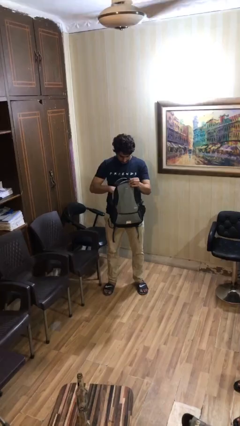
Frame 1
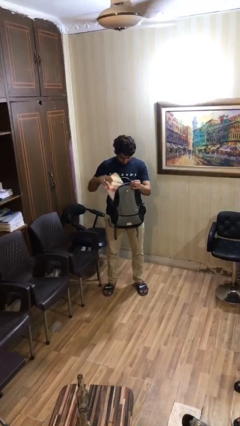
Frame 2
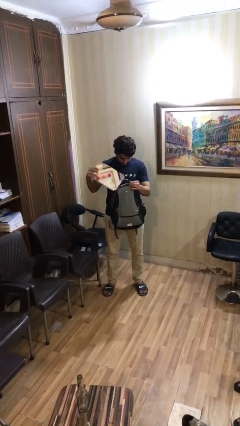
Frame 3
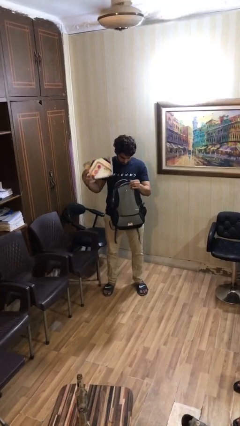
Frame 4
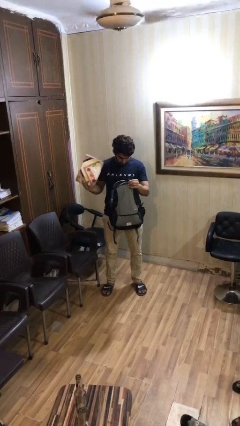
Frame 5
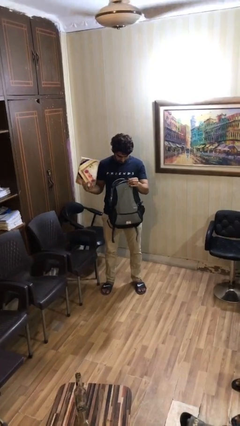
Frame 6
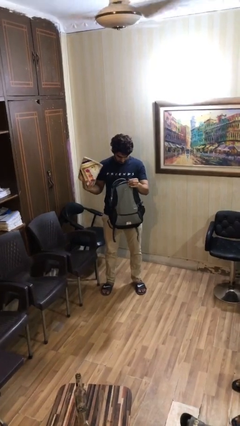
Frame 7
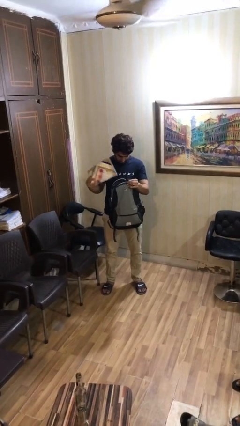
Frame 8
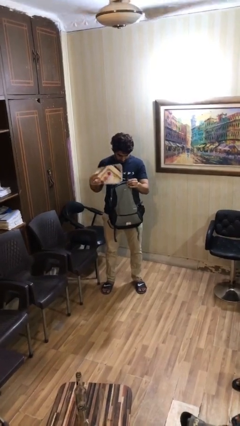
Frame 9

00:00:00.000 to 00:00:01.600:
person takes object from backpack

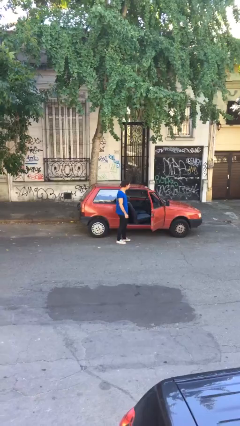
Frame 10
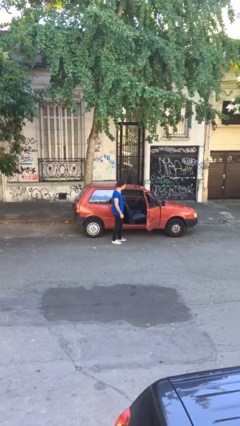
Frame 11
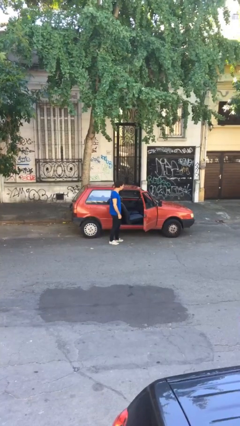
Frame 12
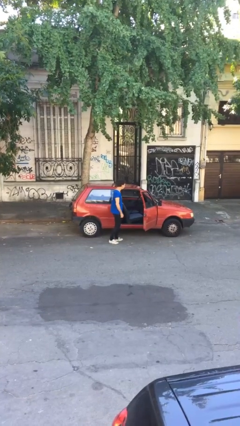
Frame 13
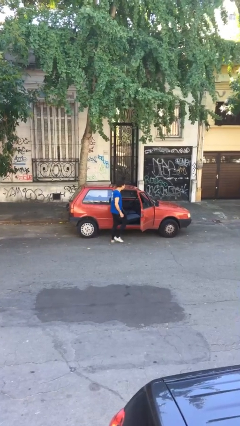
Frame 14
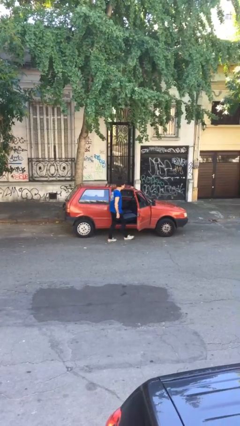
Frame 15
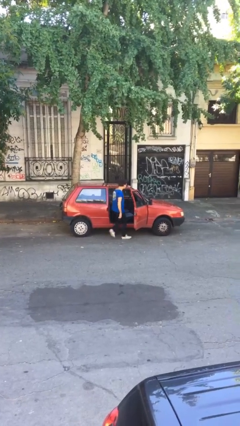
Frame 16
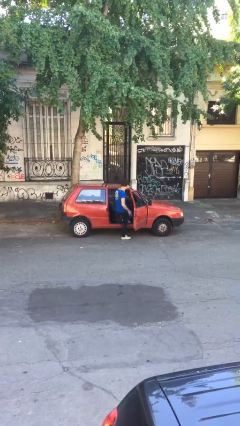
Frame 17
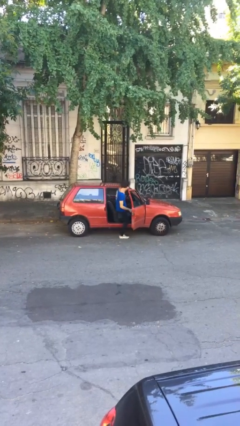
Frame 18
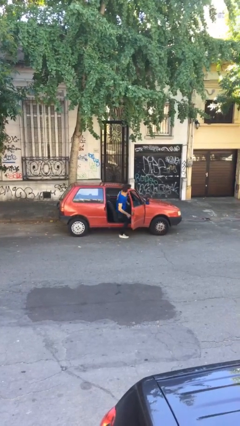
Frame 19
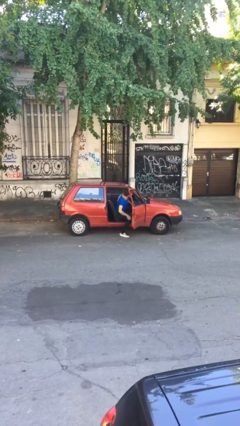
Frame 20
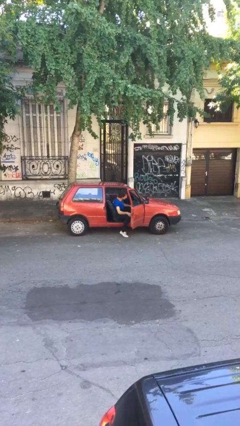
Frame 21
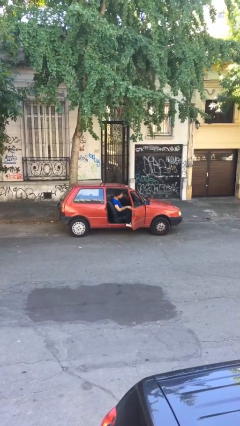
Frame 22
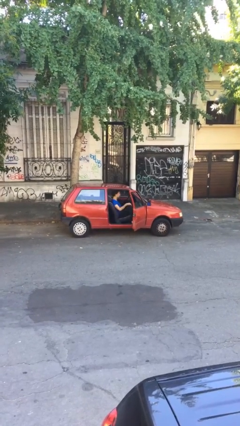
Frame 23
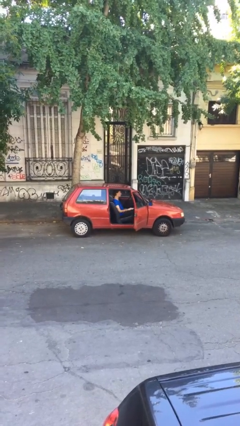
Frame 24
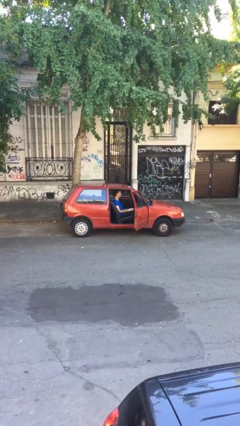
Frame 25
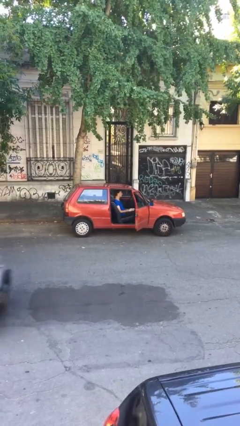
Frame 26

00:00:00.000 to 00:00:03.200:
person enters car

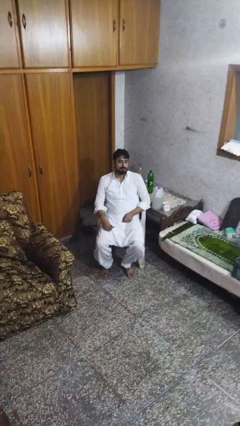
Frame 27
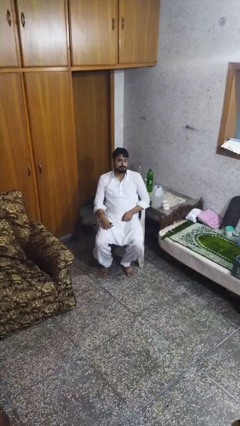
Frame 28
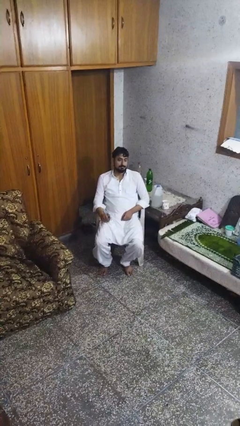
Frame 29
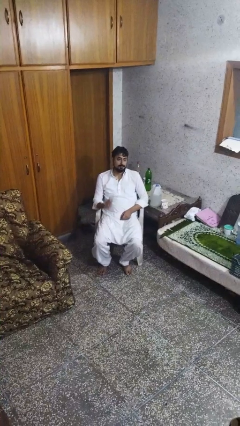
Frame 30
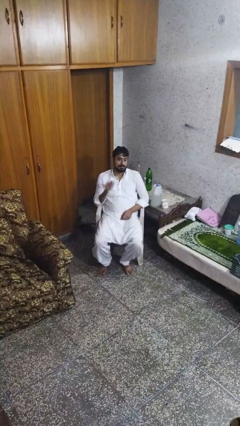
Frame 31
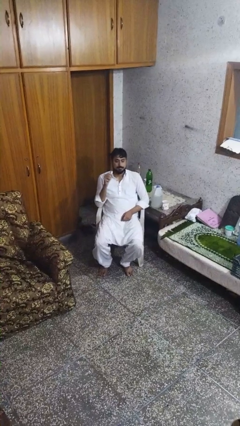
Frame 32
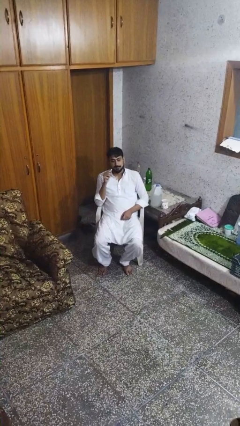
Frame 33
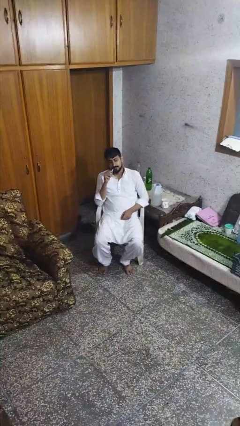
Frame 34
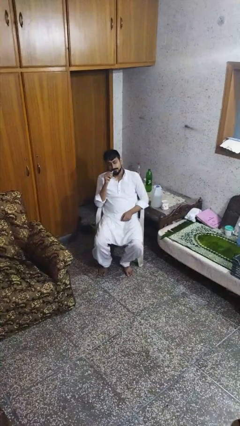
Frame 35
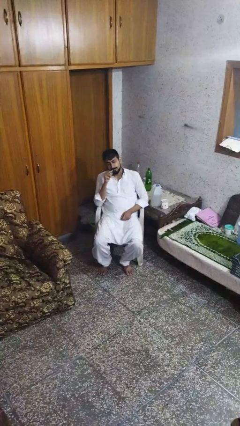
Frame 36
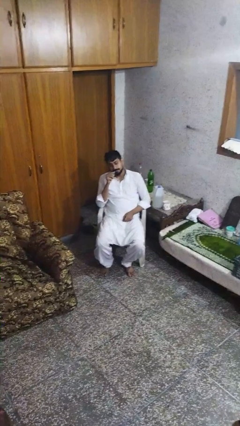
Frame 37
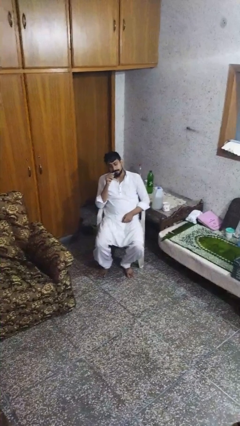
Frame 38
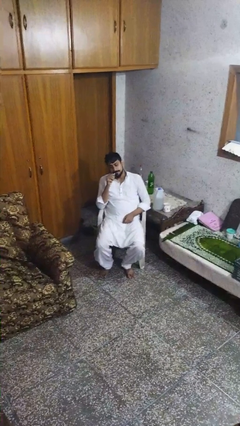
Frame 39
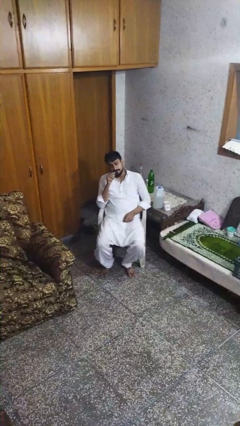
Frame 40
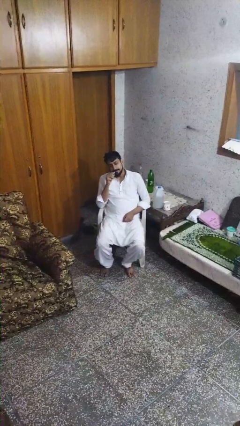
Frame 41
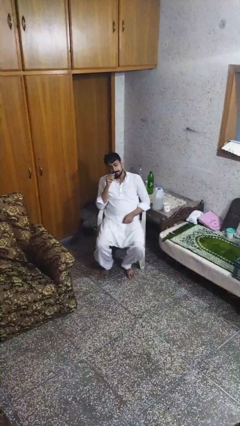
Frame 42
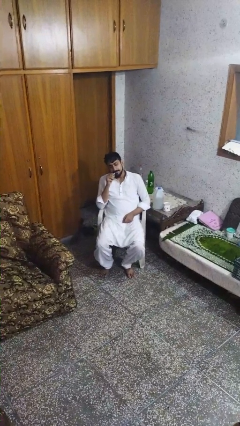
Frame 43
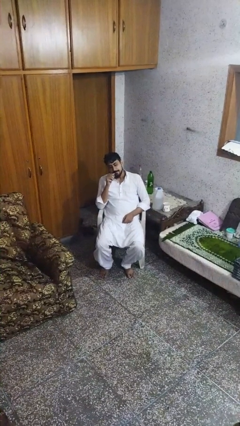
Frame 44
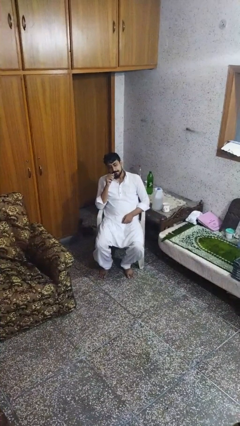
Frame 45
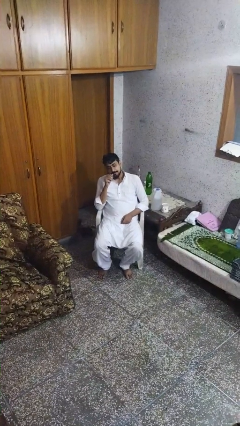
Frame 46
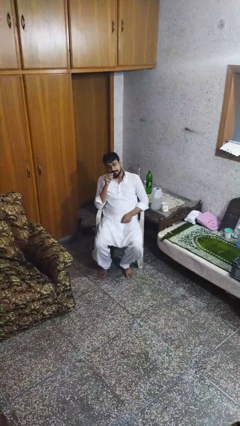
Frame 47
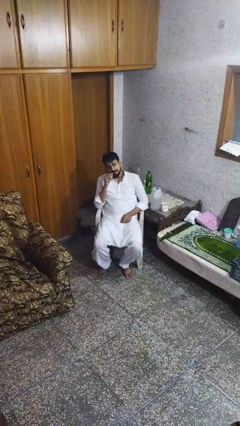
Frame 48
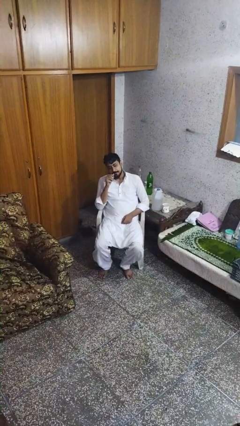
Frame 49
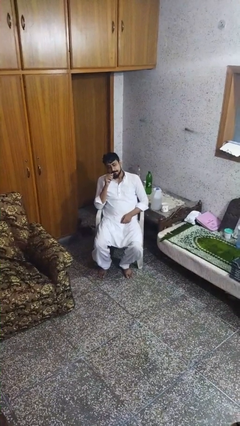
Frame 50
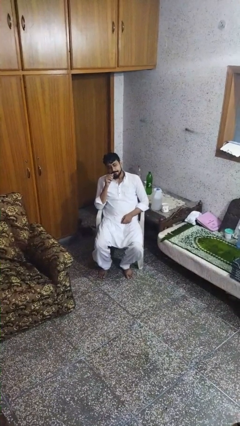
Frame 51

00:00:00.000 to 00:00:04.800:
person vapes

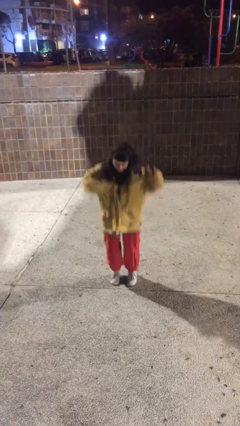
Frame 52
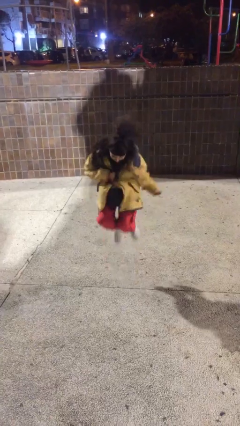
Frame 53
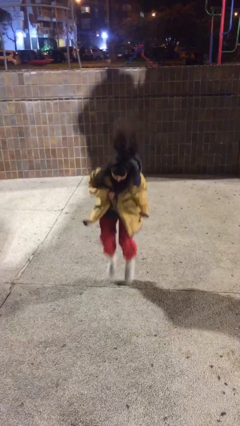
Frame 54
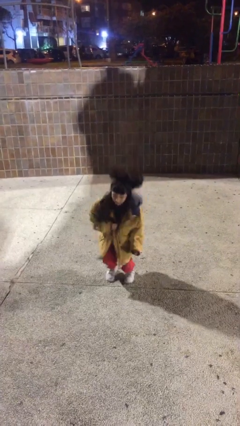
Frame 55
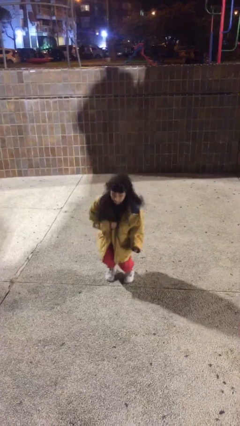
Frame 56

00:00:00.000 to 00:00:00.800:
person jumps

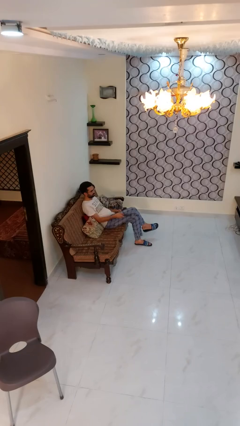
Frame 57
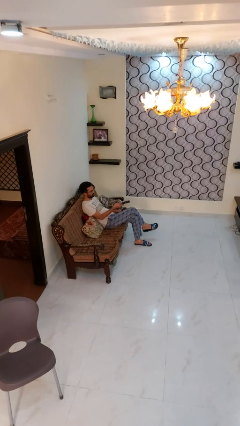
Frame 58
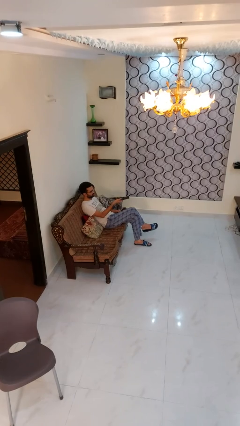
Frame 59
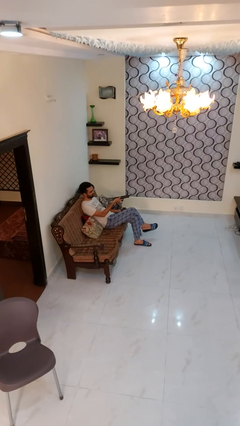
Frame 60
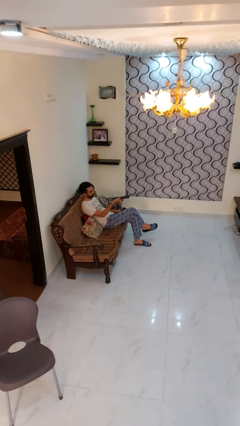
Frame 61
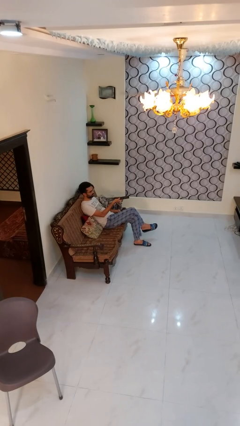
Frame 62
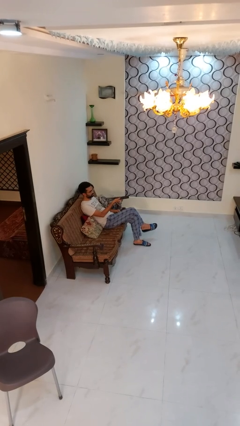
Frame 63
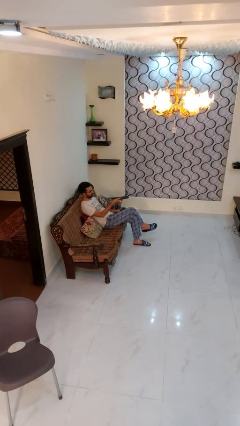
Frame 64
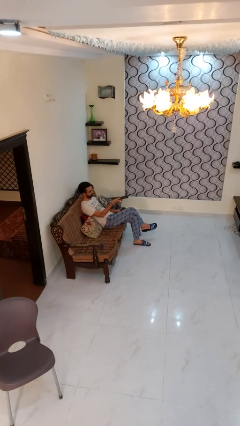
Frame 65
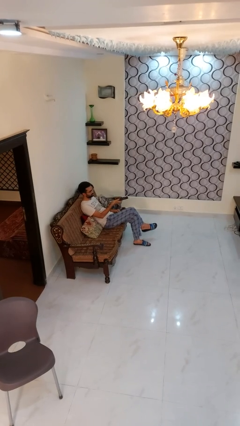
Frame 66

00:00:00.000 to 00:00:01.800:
person uses television remote

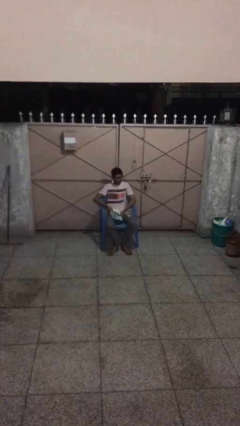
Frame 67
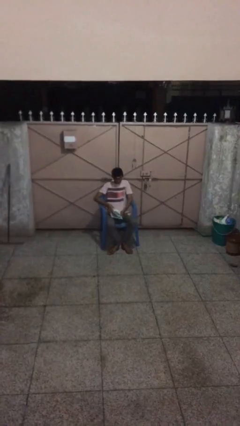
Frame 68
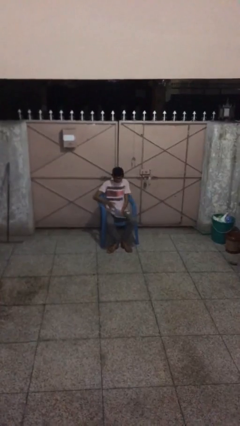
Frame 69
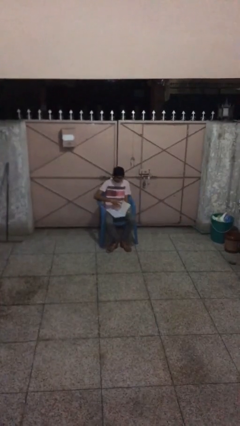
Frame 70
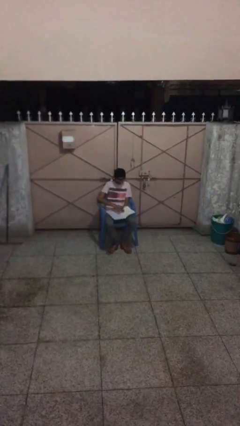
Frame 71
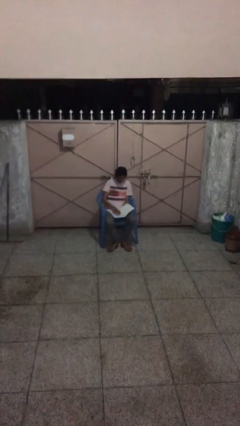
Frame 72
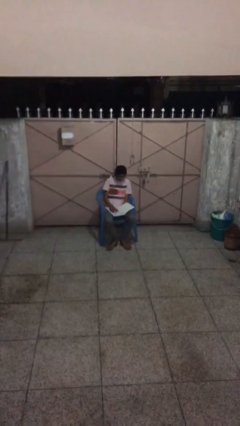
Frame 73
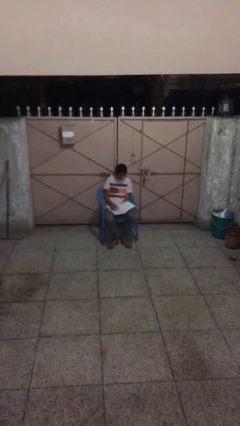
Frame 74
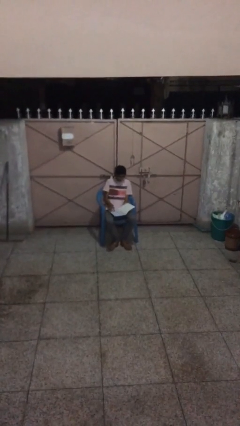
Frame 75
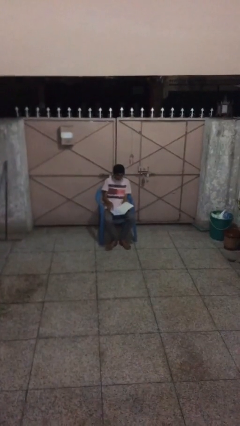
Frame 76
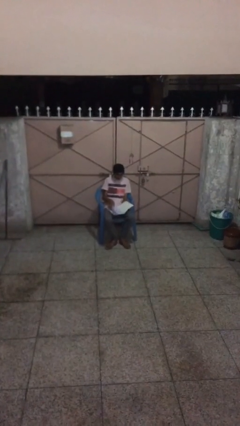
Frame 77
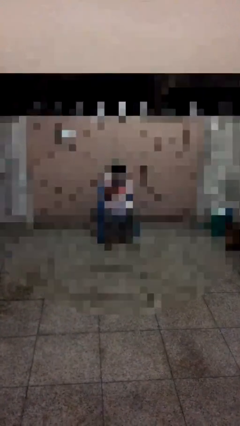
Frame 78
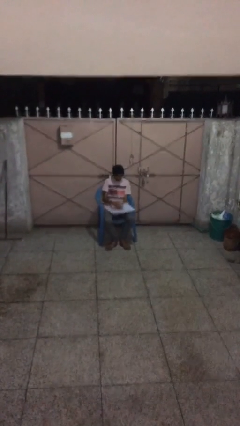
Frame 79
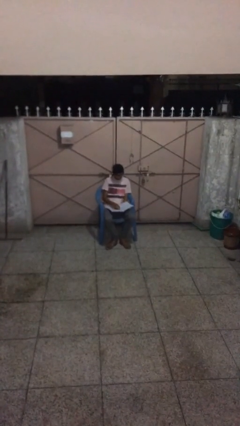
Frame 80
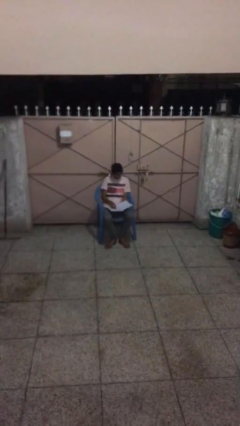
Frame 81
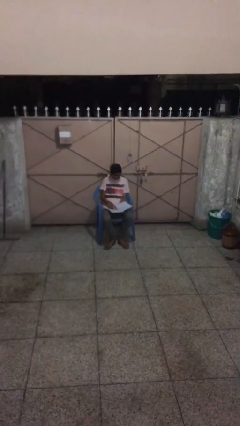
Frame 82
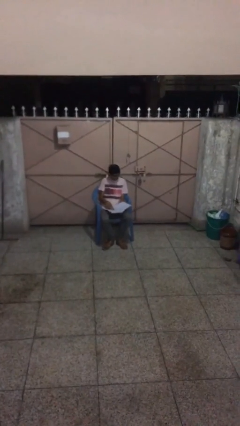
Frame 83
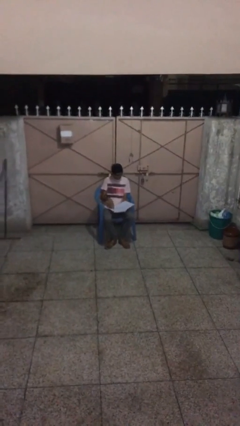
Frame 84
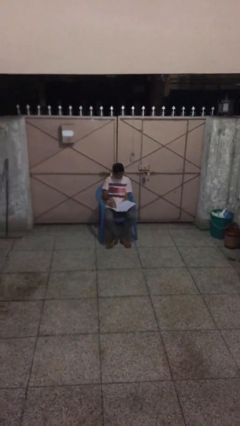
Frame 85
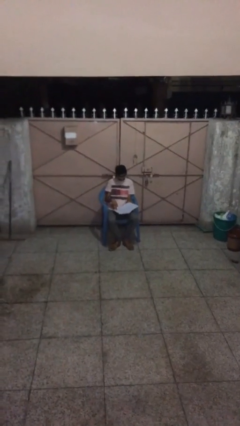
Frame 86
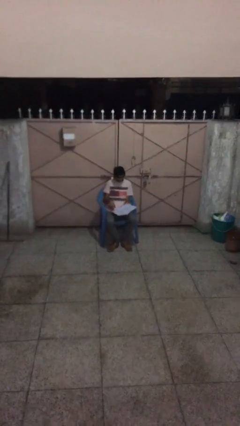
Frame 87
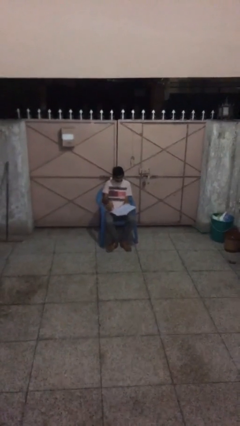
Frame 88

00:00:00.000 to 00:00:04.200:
person reads document

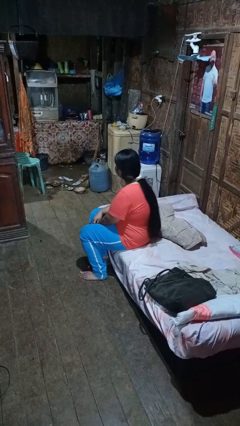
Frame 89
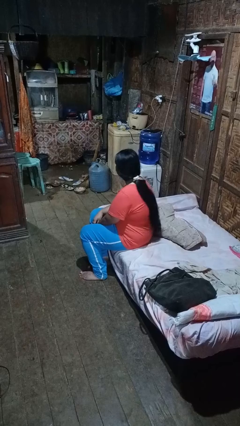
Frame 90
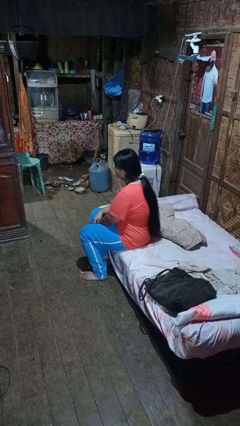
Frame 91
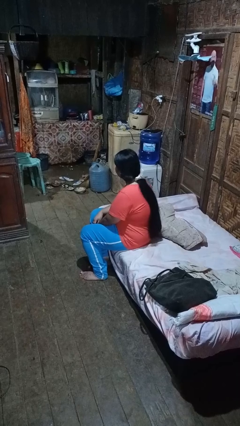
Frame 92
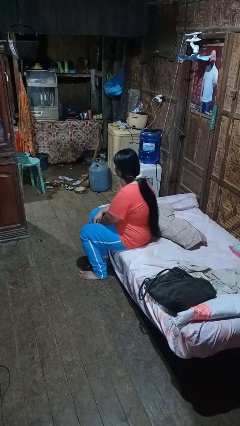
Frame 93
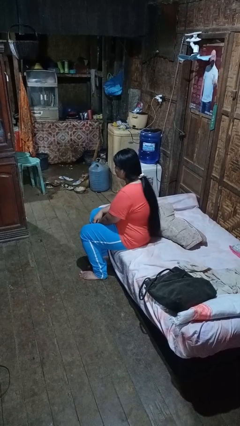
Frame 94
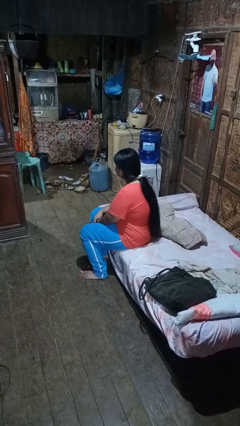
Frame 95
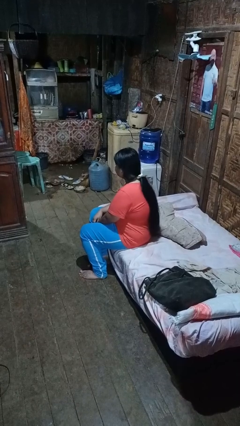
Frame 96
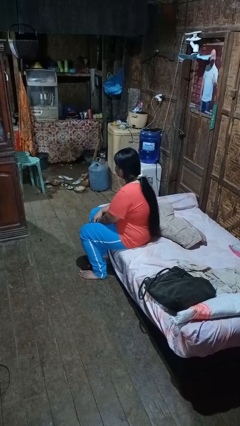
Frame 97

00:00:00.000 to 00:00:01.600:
person shakes head
